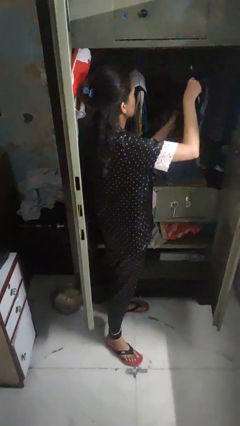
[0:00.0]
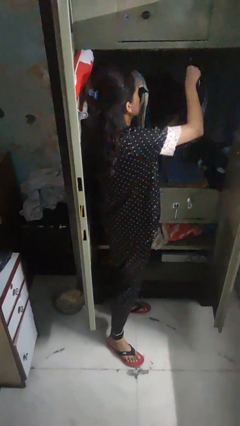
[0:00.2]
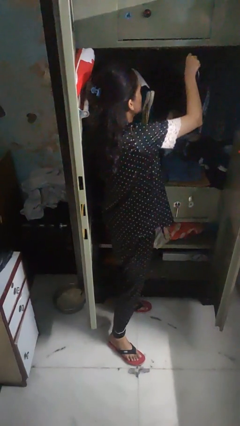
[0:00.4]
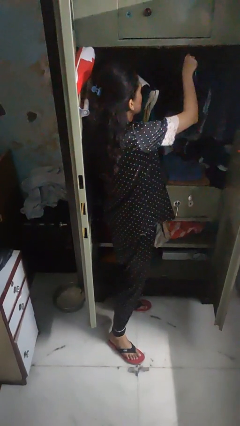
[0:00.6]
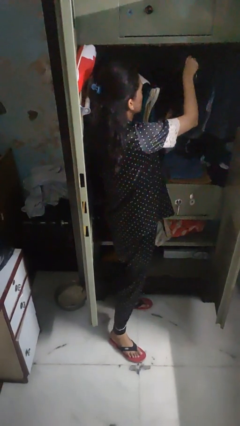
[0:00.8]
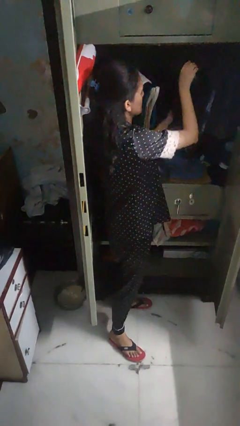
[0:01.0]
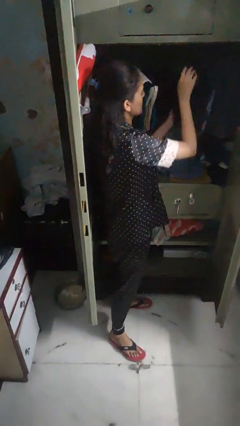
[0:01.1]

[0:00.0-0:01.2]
person puts clothes into closet

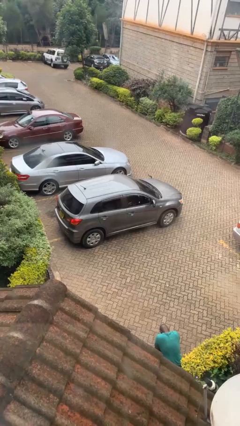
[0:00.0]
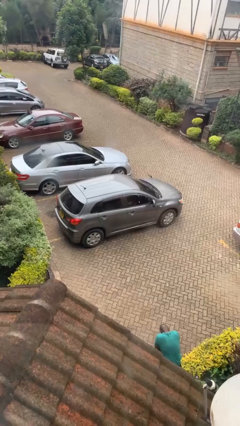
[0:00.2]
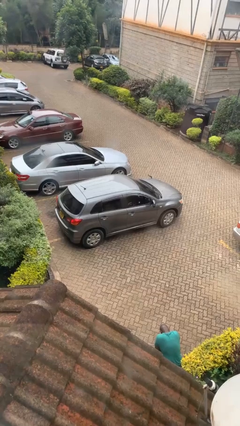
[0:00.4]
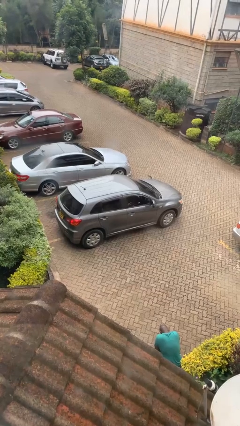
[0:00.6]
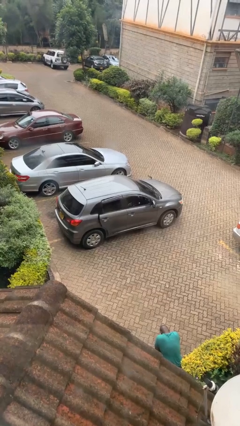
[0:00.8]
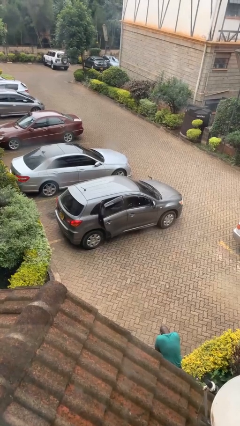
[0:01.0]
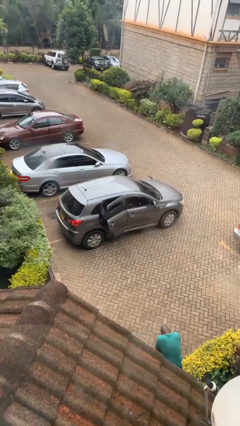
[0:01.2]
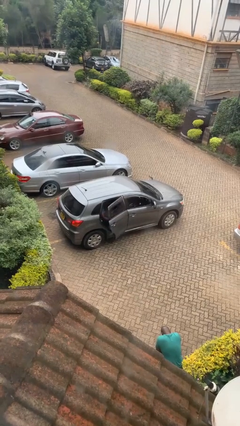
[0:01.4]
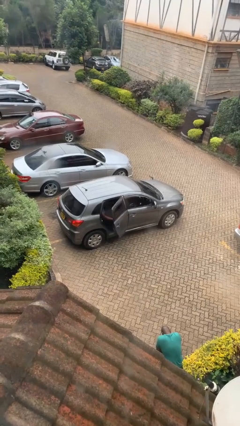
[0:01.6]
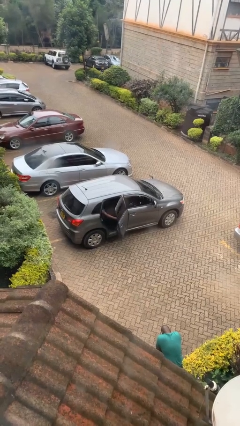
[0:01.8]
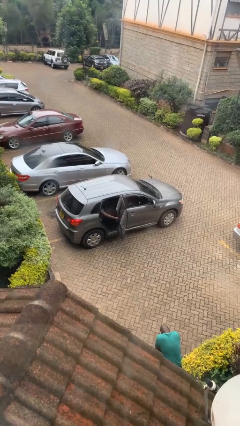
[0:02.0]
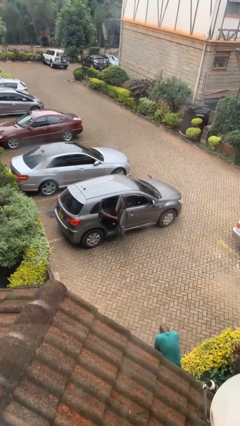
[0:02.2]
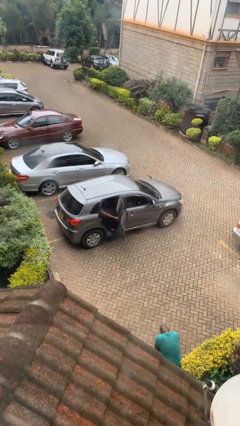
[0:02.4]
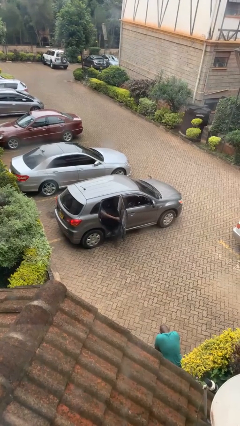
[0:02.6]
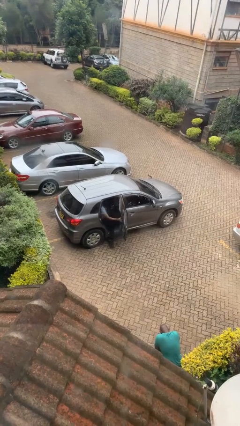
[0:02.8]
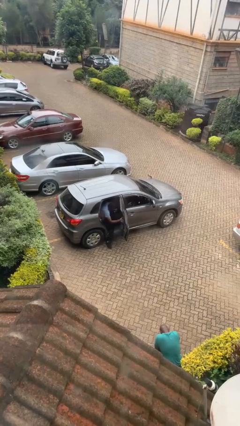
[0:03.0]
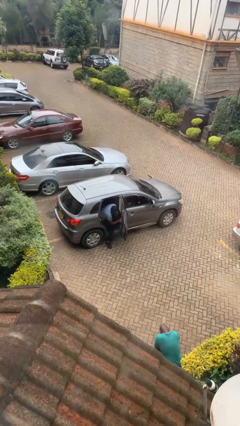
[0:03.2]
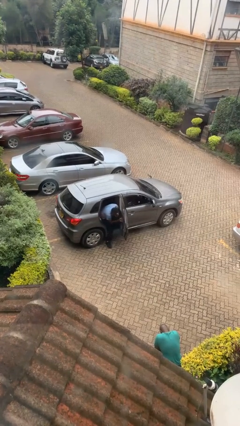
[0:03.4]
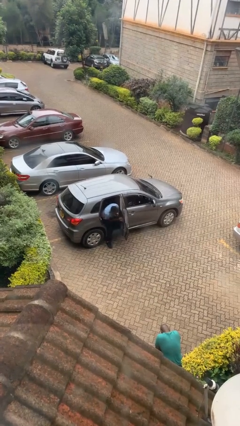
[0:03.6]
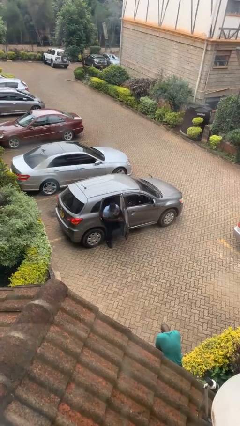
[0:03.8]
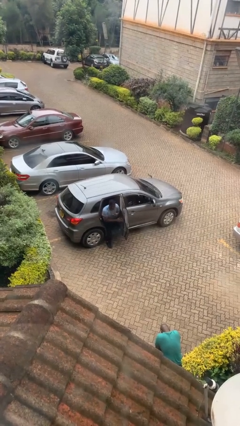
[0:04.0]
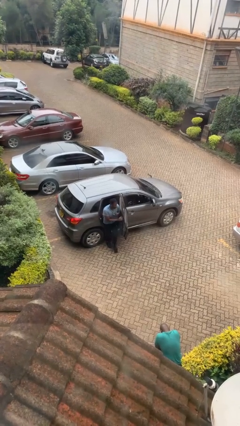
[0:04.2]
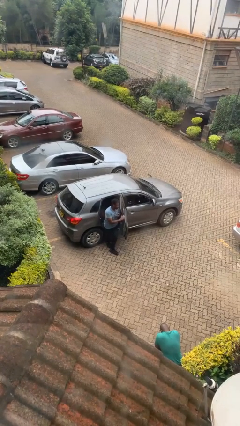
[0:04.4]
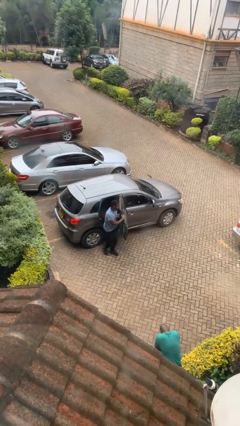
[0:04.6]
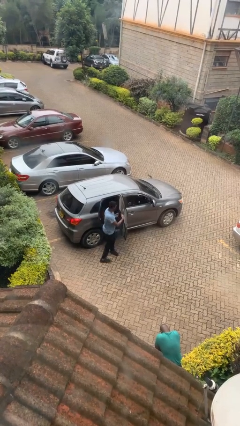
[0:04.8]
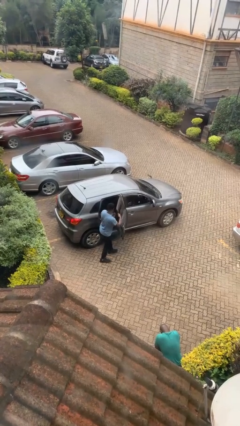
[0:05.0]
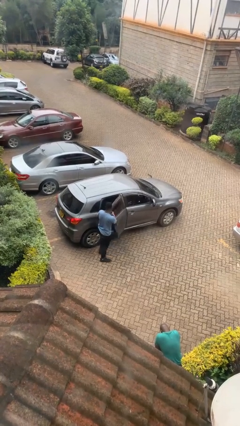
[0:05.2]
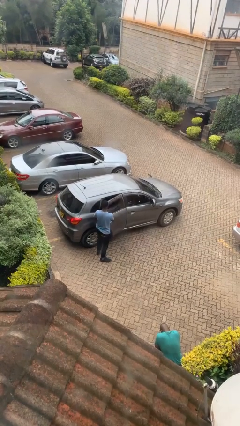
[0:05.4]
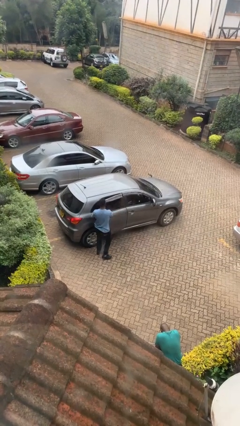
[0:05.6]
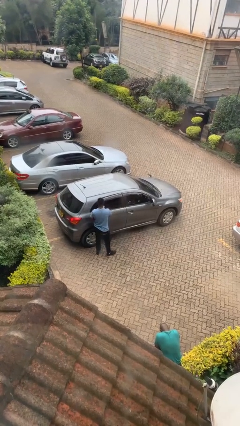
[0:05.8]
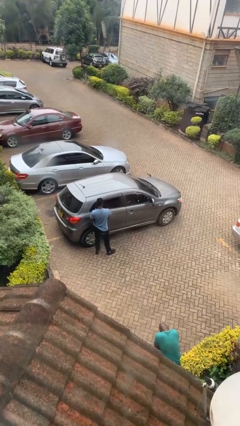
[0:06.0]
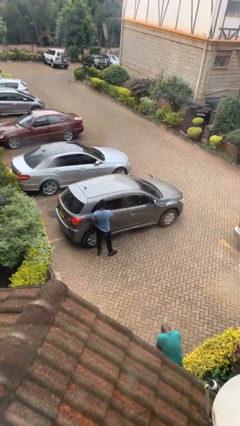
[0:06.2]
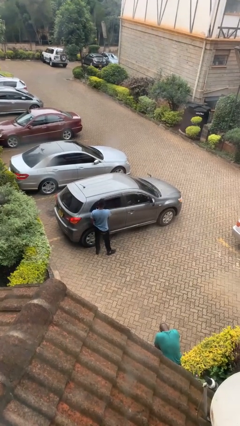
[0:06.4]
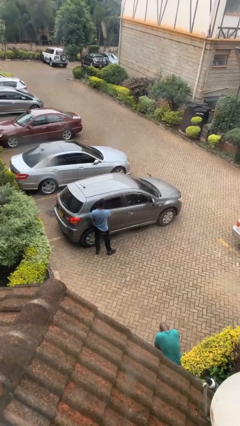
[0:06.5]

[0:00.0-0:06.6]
car drops off person

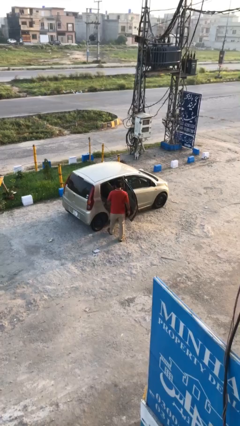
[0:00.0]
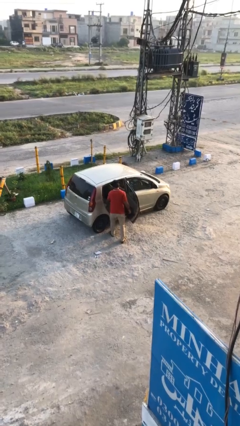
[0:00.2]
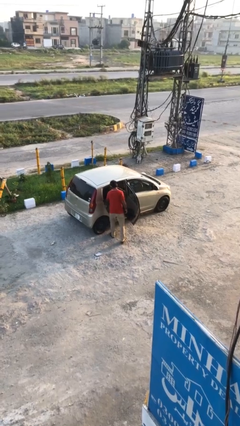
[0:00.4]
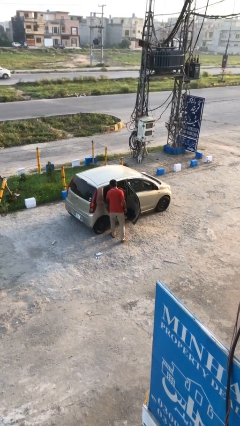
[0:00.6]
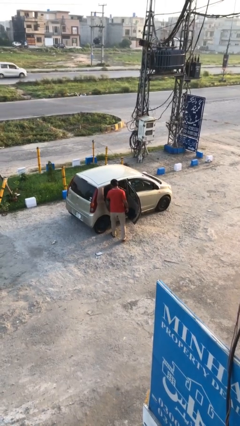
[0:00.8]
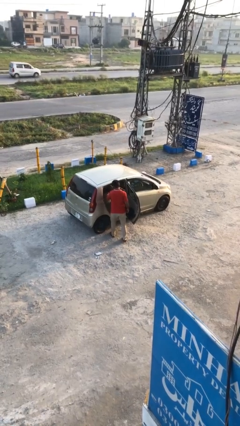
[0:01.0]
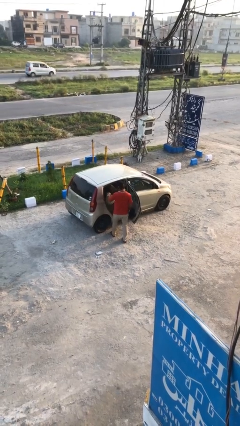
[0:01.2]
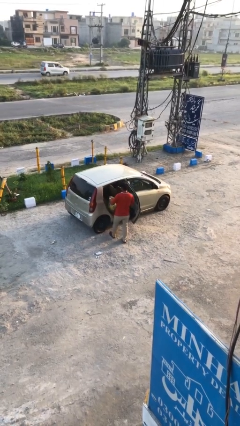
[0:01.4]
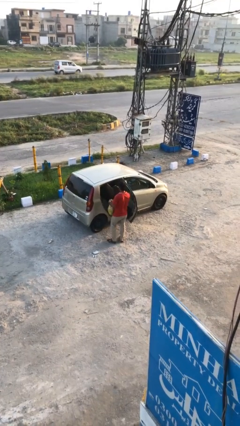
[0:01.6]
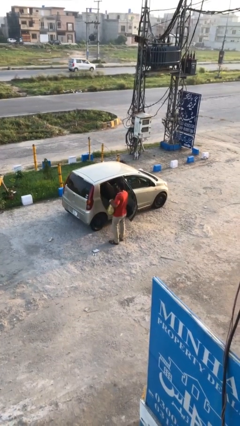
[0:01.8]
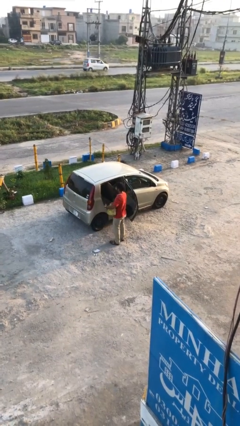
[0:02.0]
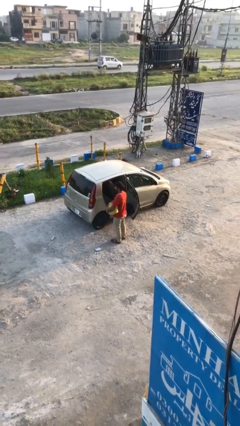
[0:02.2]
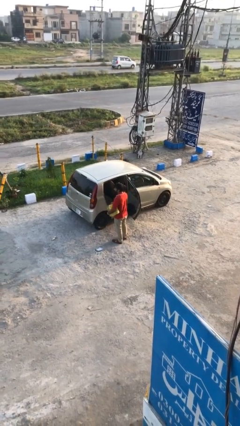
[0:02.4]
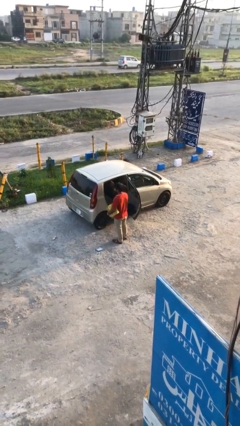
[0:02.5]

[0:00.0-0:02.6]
person unloads car

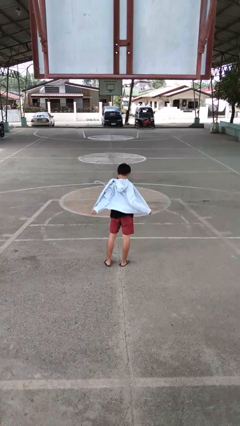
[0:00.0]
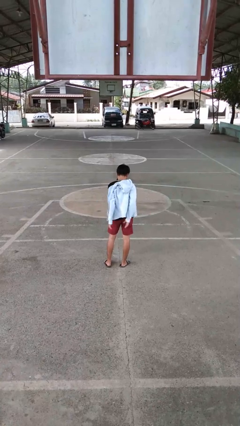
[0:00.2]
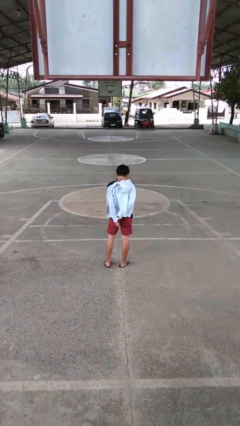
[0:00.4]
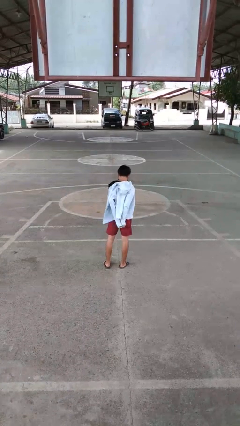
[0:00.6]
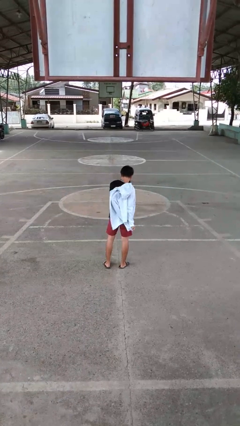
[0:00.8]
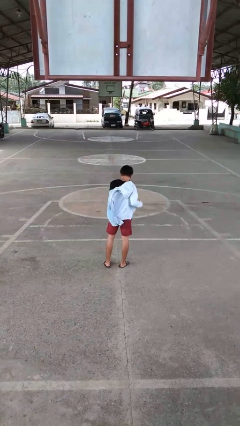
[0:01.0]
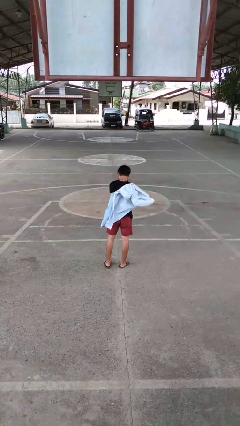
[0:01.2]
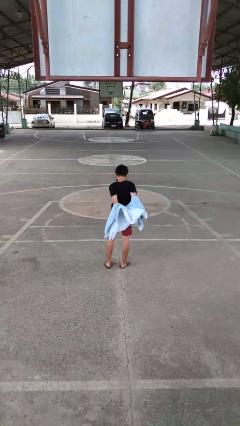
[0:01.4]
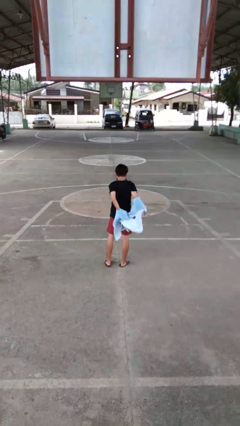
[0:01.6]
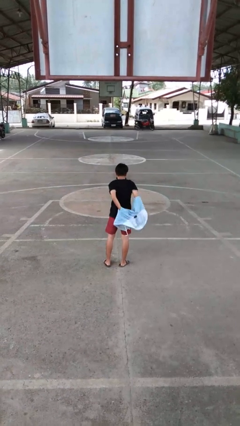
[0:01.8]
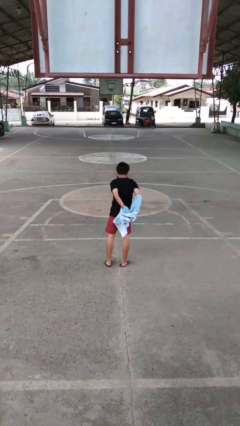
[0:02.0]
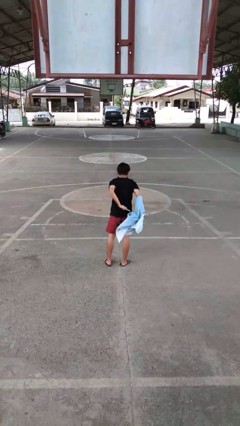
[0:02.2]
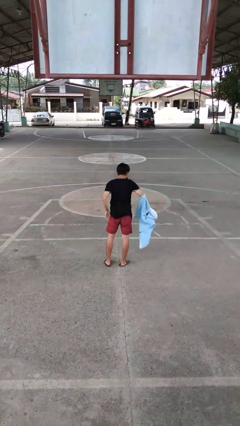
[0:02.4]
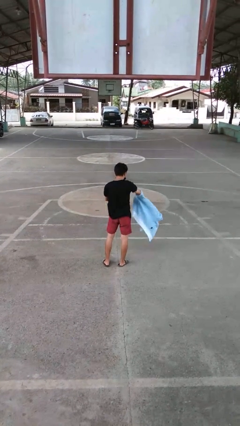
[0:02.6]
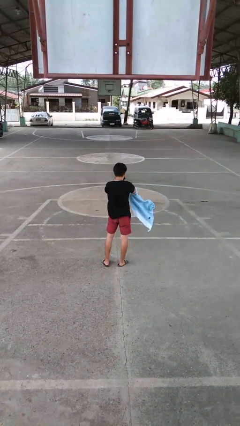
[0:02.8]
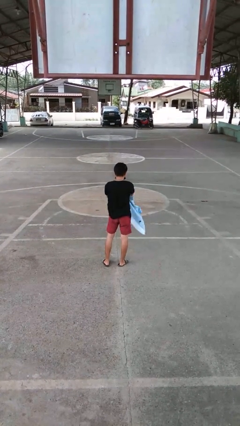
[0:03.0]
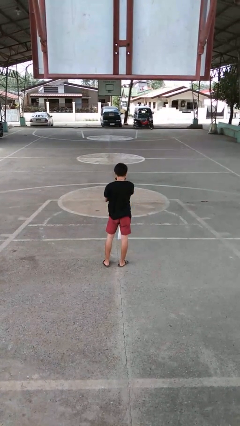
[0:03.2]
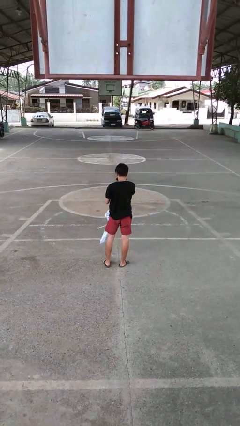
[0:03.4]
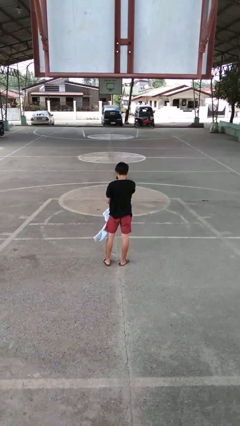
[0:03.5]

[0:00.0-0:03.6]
person takes off jacket

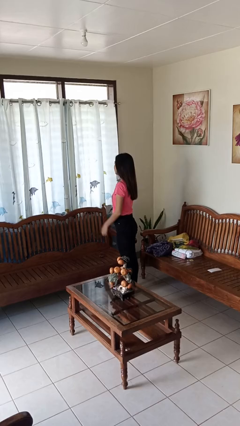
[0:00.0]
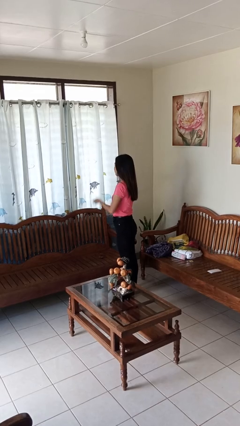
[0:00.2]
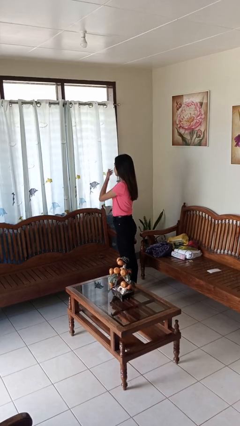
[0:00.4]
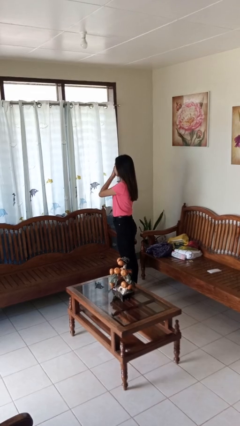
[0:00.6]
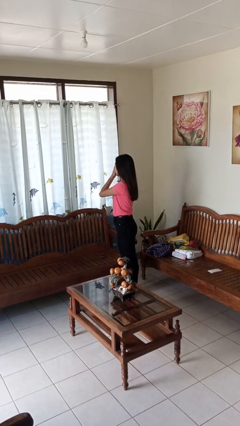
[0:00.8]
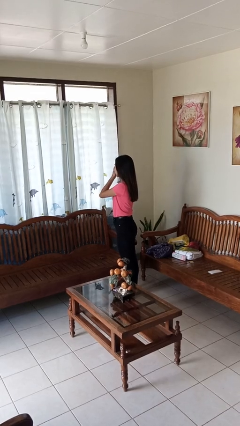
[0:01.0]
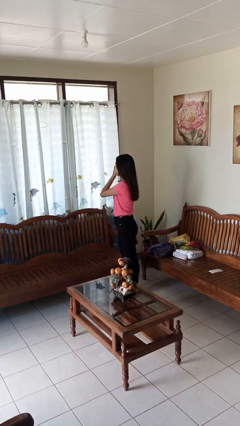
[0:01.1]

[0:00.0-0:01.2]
person yawns

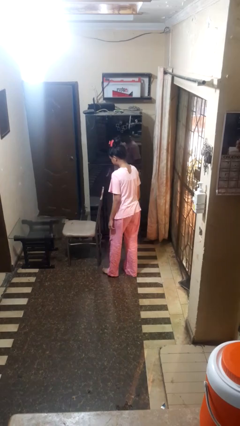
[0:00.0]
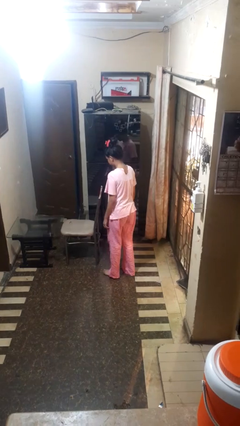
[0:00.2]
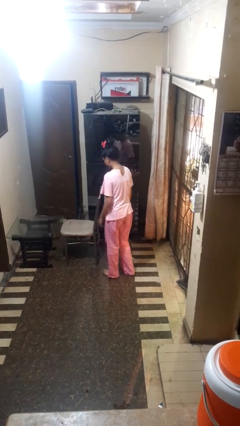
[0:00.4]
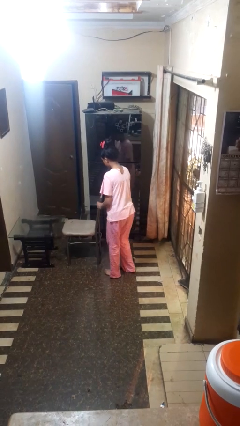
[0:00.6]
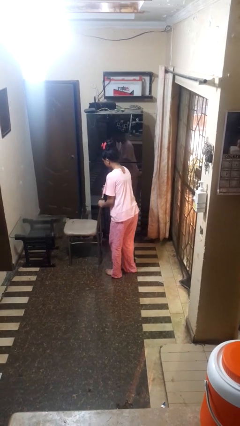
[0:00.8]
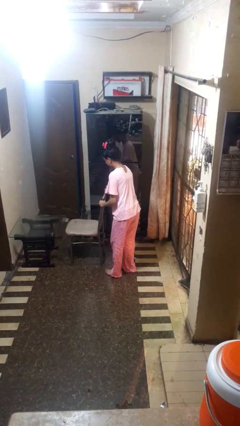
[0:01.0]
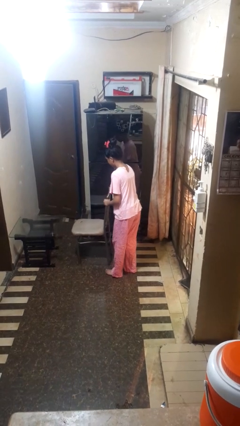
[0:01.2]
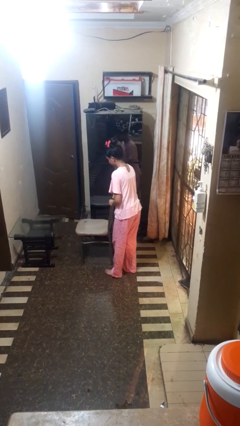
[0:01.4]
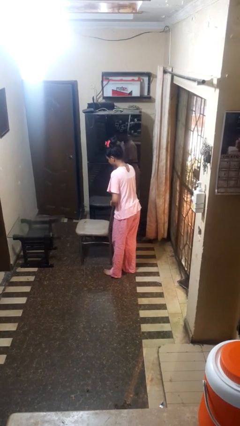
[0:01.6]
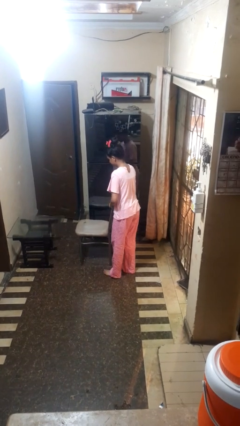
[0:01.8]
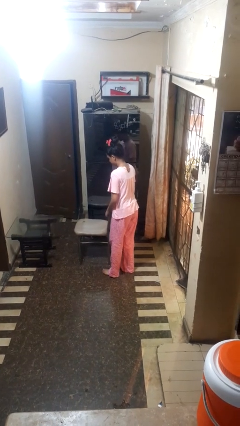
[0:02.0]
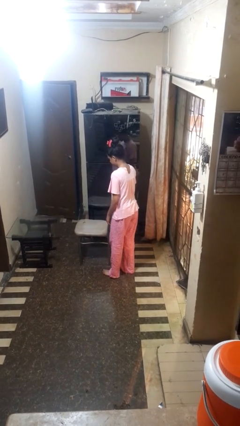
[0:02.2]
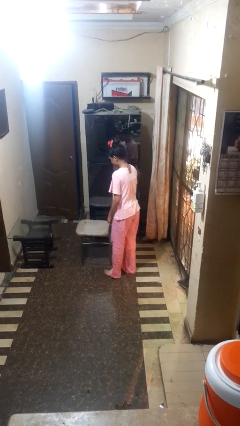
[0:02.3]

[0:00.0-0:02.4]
person pulls out chair
